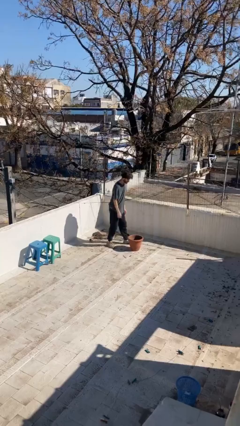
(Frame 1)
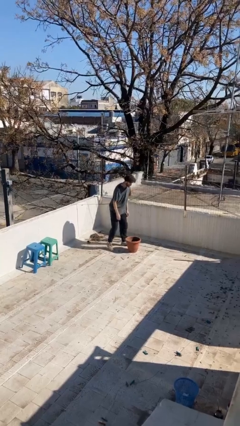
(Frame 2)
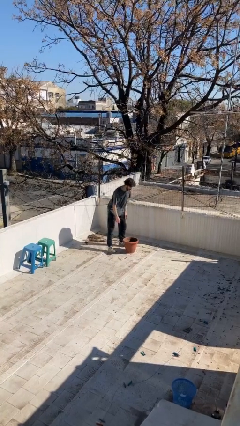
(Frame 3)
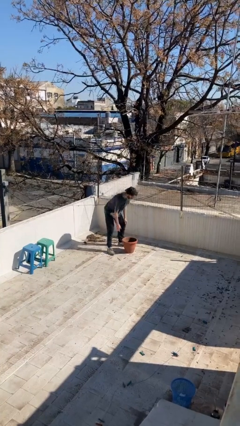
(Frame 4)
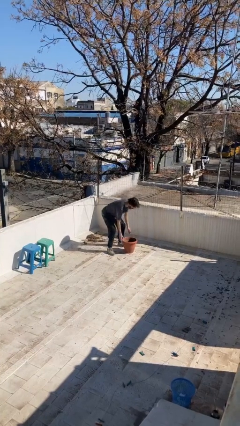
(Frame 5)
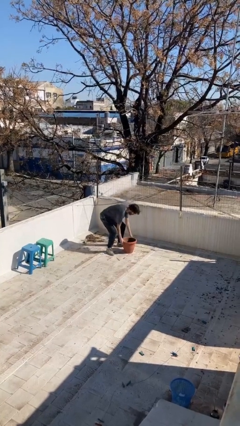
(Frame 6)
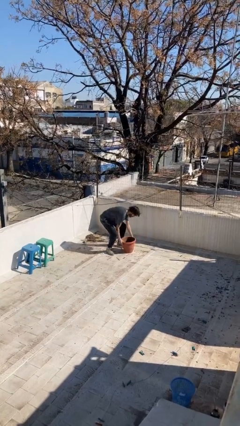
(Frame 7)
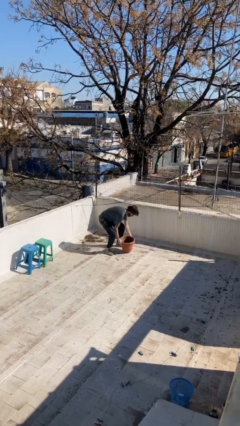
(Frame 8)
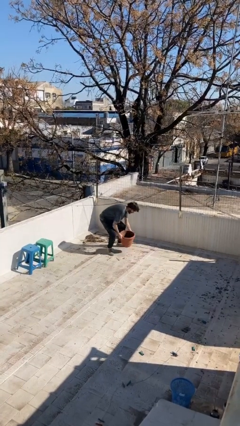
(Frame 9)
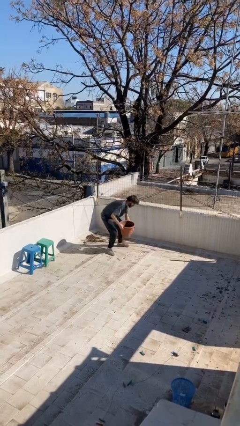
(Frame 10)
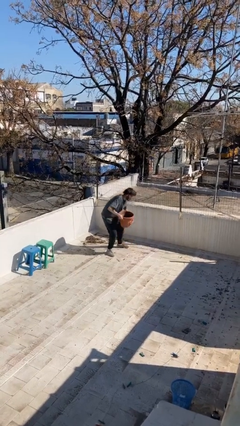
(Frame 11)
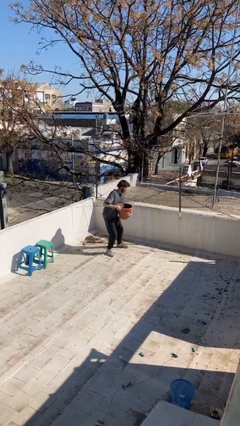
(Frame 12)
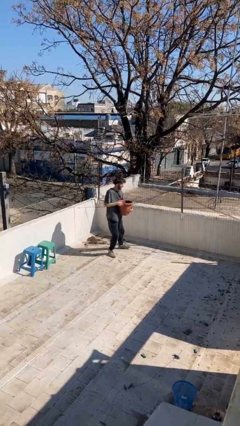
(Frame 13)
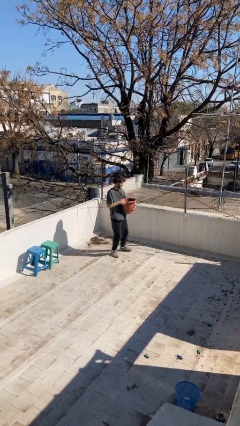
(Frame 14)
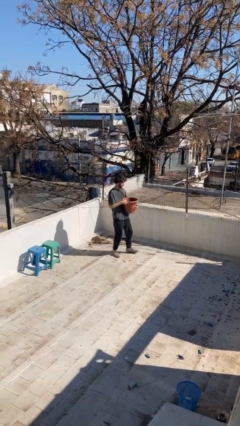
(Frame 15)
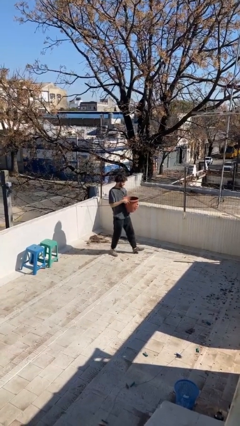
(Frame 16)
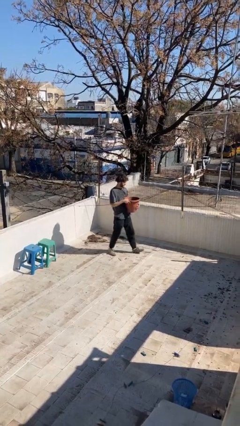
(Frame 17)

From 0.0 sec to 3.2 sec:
person picks up object from floor

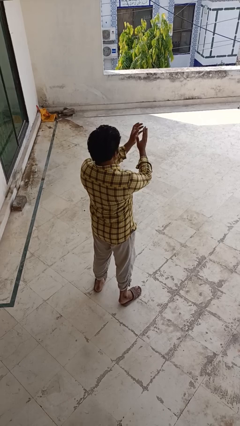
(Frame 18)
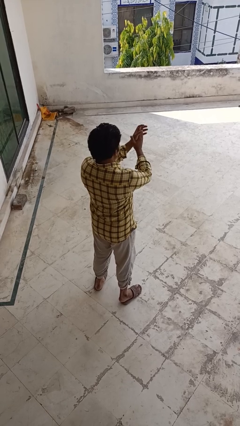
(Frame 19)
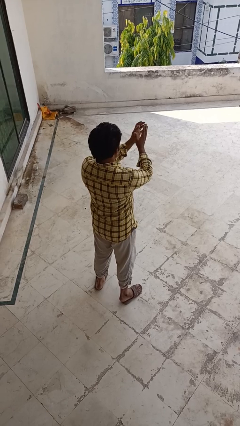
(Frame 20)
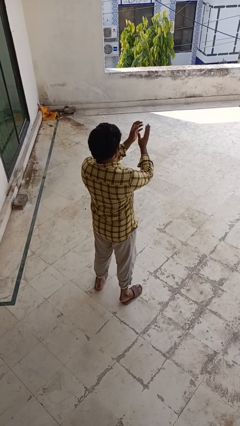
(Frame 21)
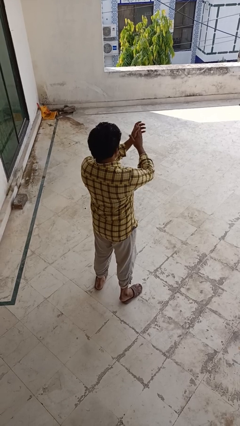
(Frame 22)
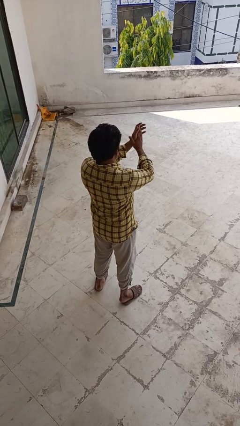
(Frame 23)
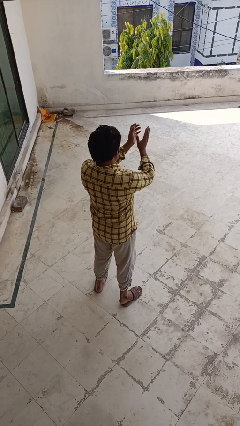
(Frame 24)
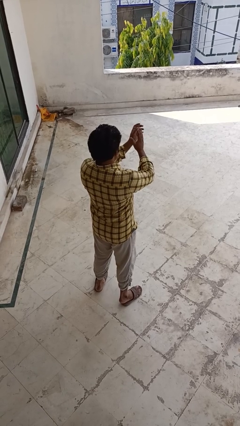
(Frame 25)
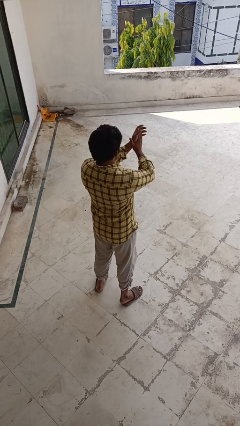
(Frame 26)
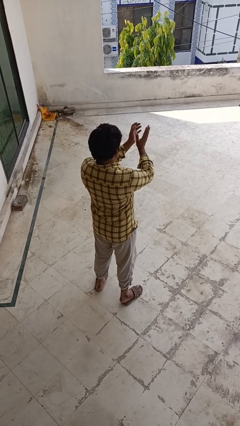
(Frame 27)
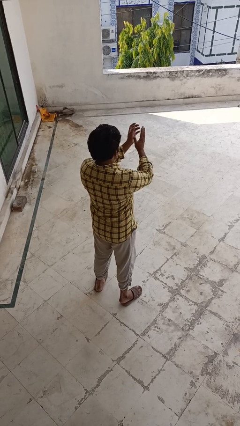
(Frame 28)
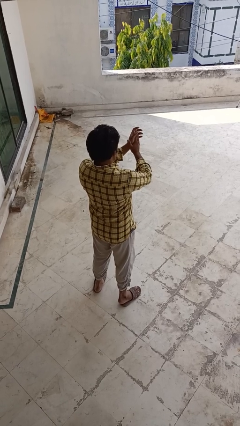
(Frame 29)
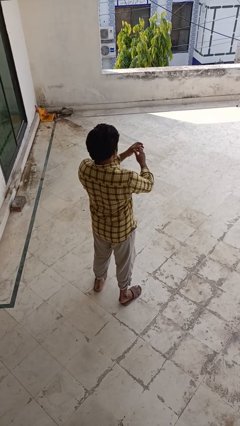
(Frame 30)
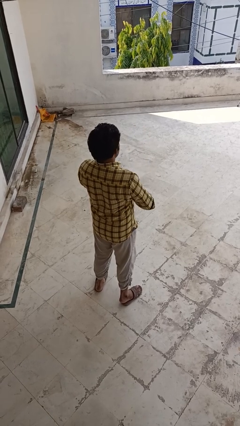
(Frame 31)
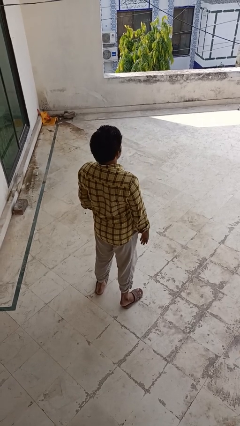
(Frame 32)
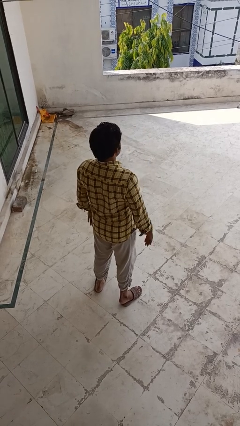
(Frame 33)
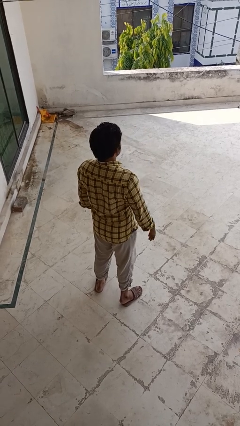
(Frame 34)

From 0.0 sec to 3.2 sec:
person claps hands

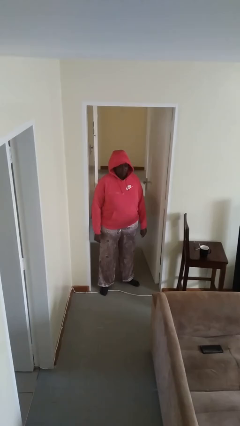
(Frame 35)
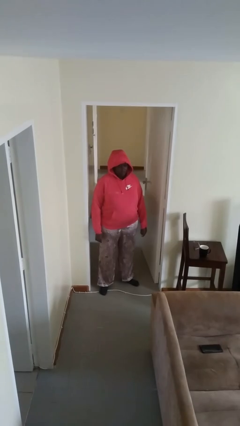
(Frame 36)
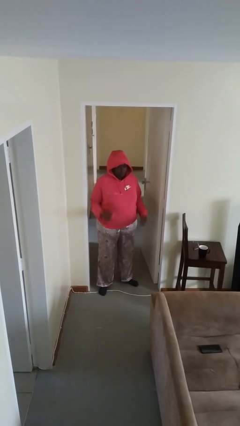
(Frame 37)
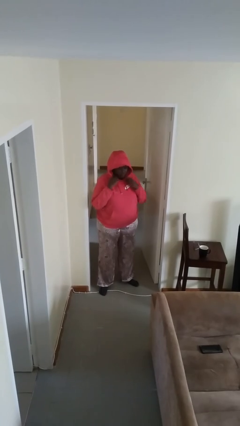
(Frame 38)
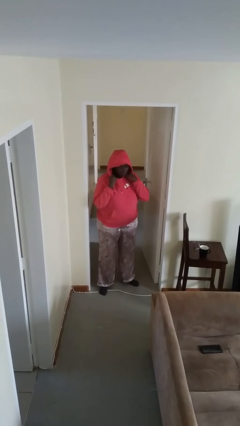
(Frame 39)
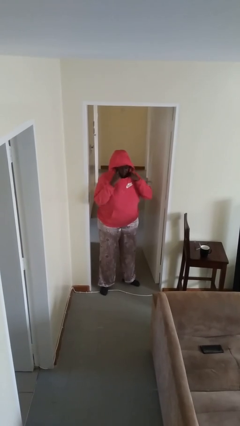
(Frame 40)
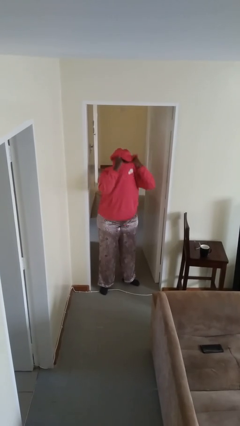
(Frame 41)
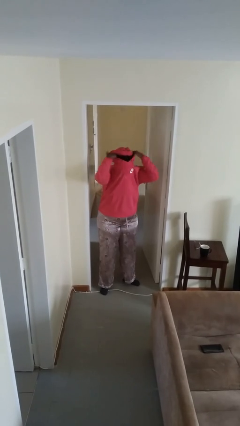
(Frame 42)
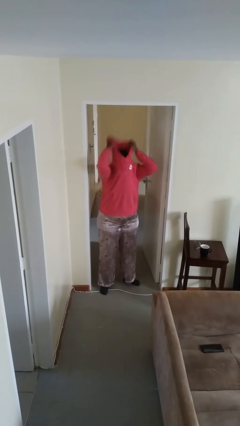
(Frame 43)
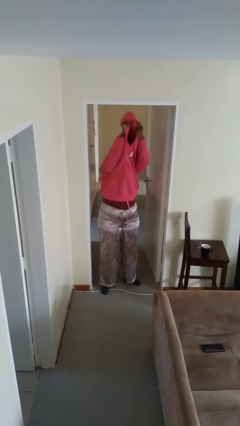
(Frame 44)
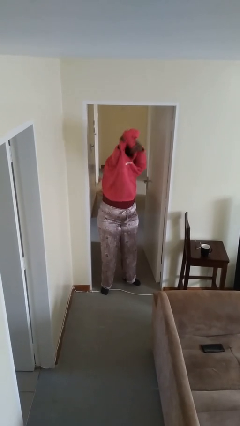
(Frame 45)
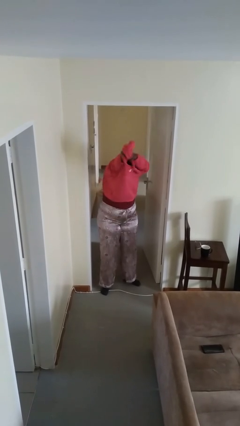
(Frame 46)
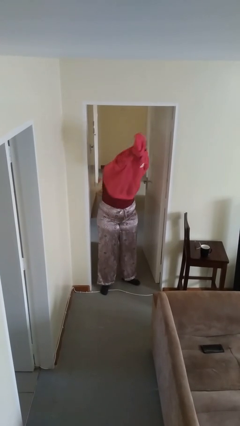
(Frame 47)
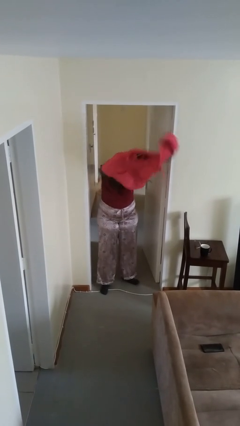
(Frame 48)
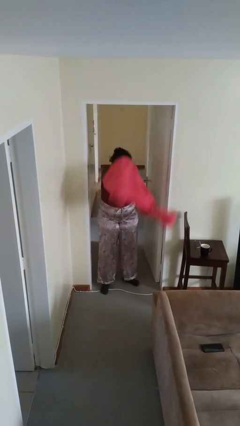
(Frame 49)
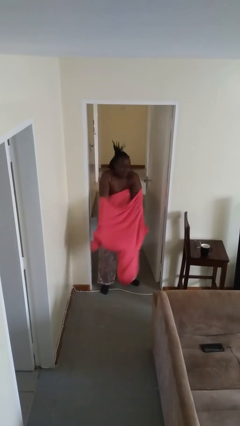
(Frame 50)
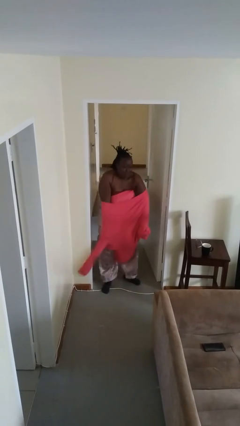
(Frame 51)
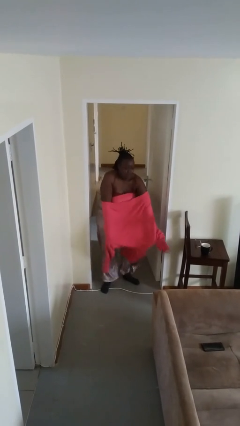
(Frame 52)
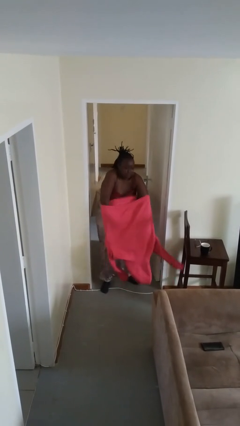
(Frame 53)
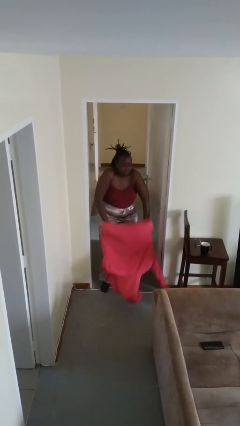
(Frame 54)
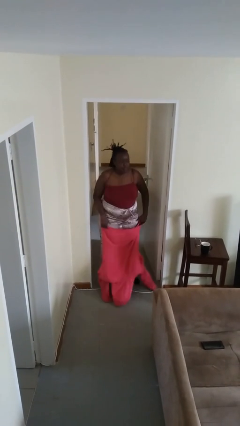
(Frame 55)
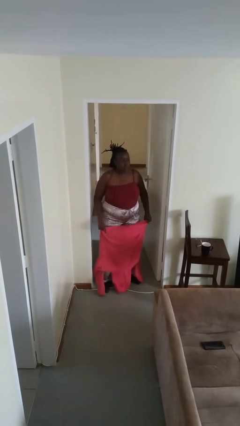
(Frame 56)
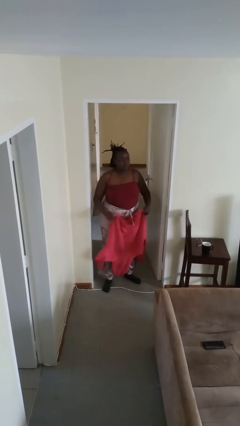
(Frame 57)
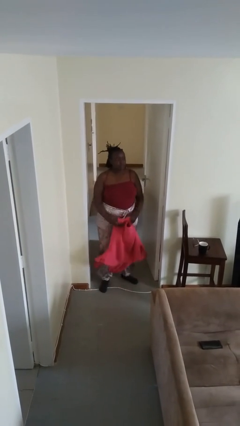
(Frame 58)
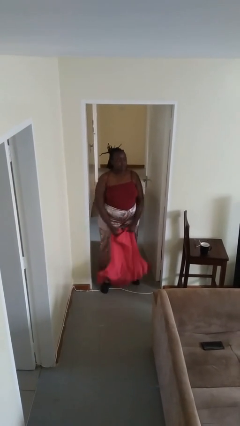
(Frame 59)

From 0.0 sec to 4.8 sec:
person takes off hoodie

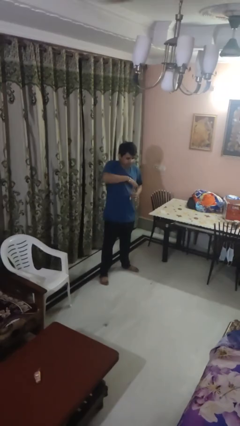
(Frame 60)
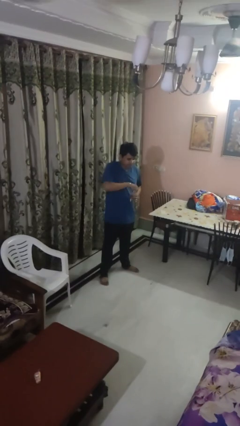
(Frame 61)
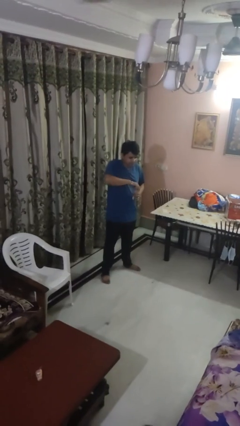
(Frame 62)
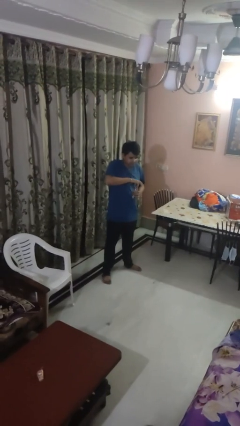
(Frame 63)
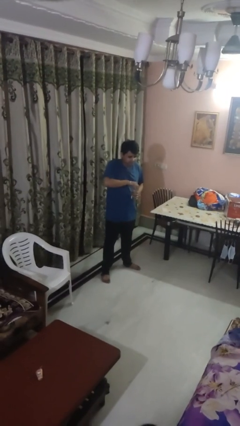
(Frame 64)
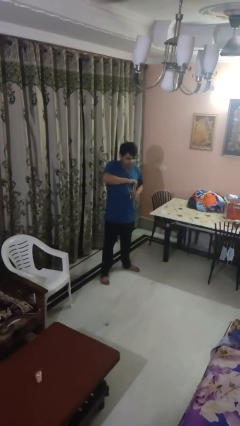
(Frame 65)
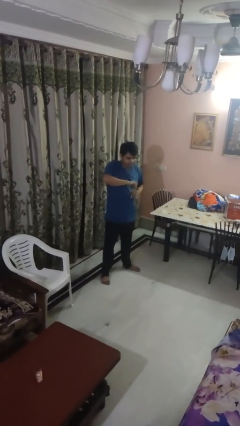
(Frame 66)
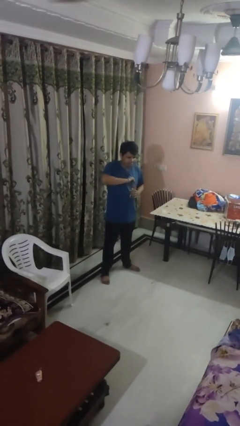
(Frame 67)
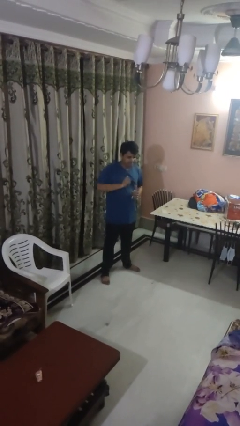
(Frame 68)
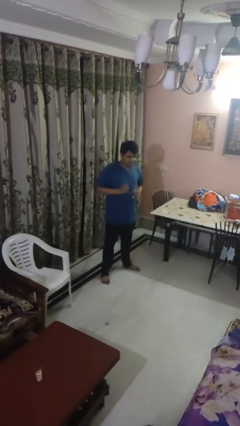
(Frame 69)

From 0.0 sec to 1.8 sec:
person unscrews lid from bottle

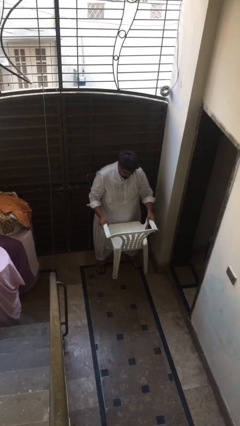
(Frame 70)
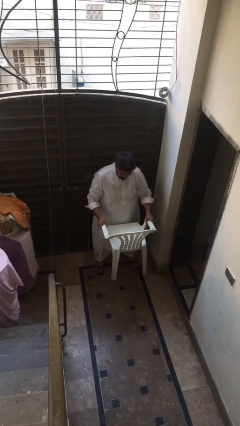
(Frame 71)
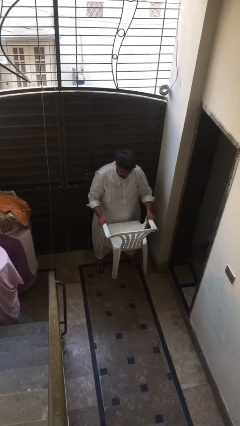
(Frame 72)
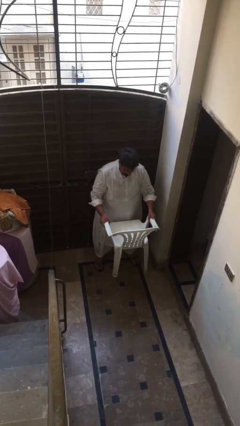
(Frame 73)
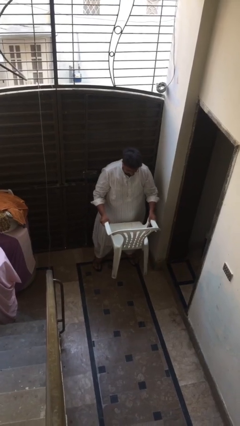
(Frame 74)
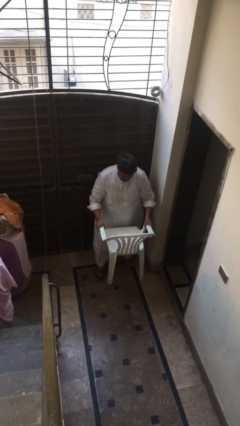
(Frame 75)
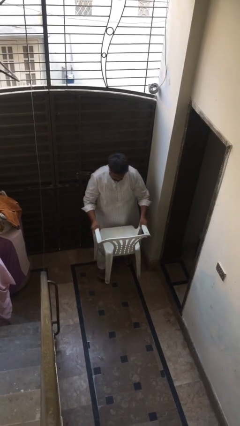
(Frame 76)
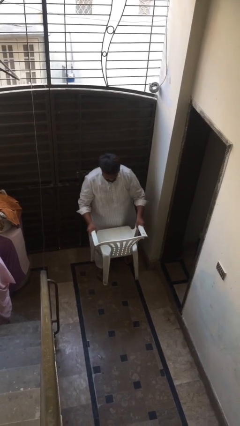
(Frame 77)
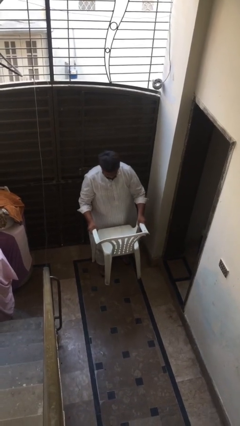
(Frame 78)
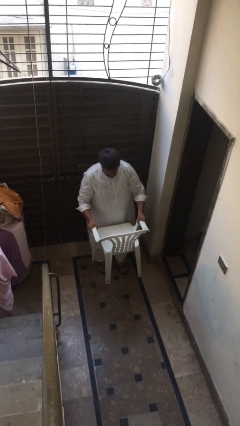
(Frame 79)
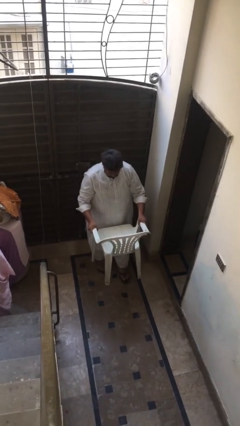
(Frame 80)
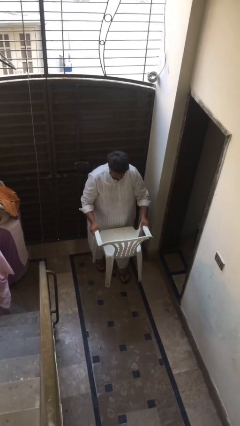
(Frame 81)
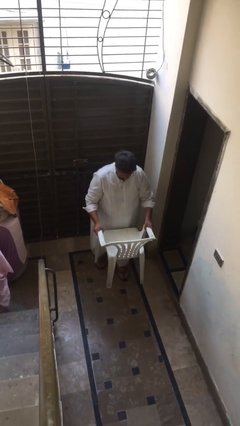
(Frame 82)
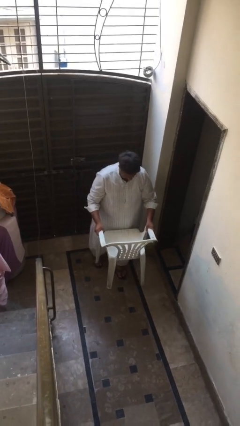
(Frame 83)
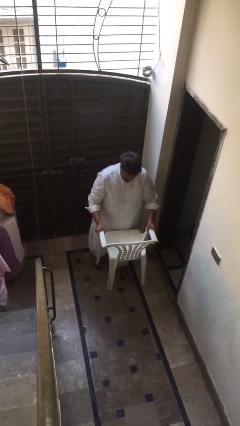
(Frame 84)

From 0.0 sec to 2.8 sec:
person carries heavy object

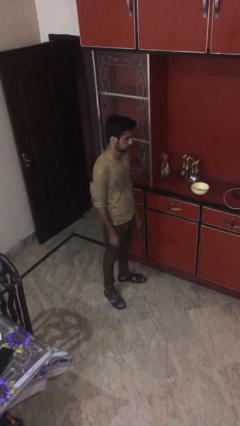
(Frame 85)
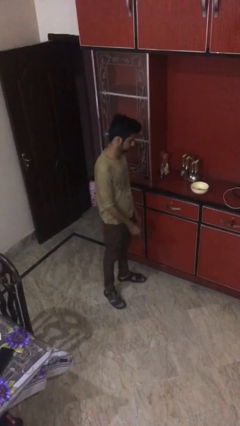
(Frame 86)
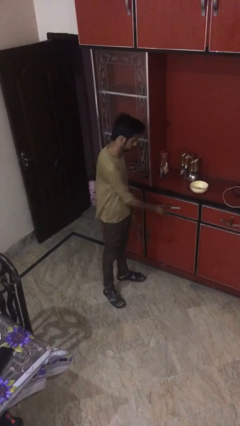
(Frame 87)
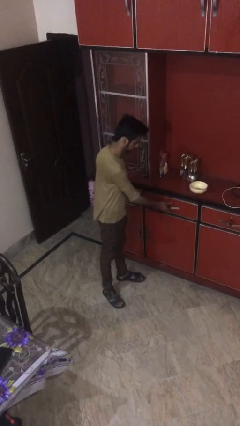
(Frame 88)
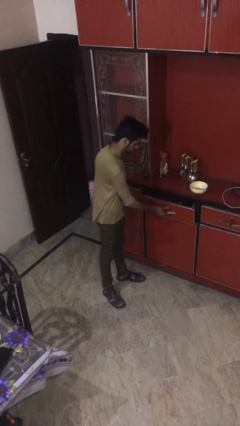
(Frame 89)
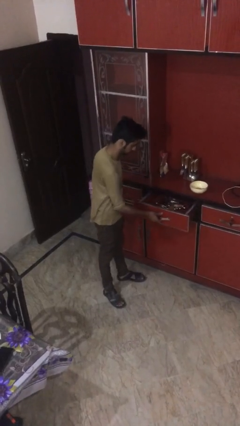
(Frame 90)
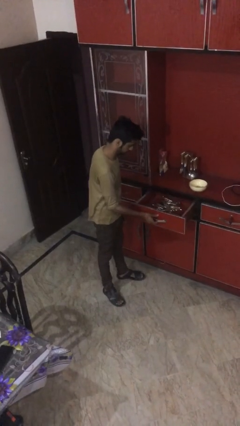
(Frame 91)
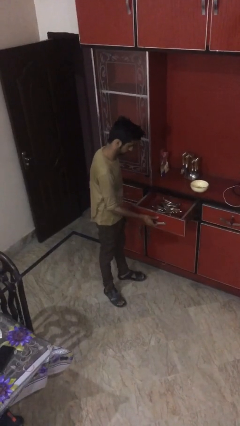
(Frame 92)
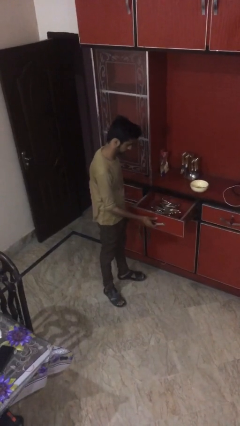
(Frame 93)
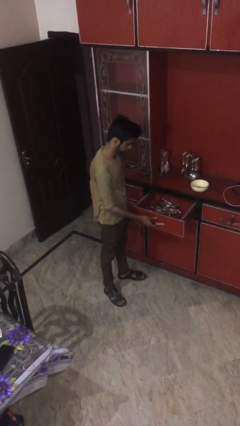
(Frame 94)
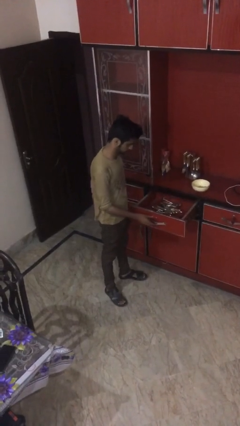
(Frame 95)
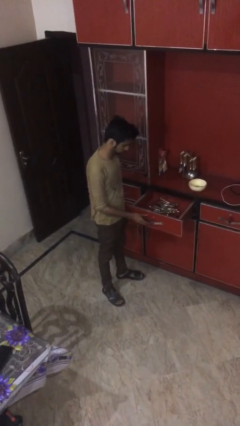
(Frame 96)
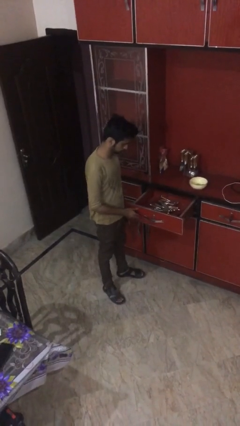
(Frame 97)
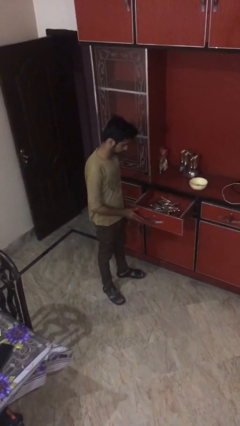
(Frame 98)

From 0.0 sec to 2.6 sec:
person opens kitchen drawer
